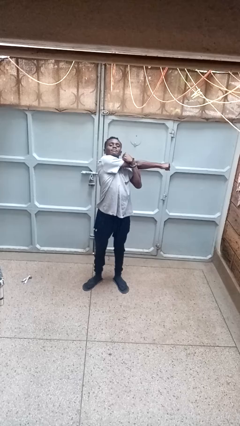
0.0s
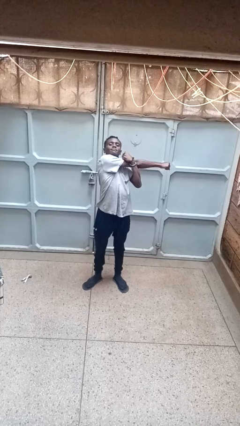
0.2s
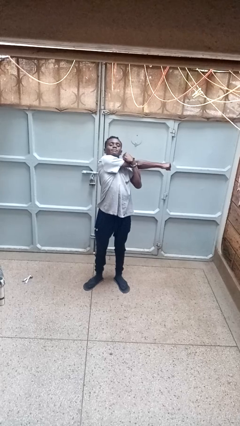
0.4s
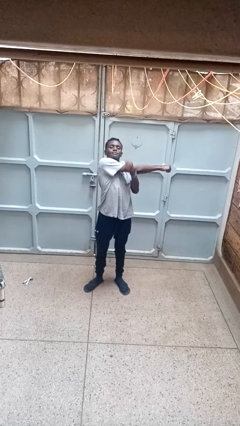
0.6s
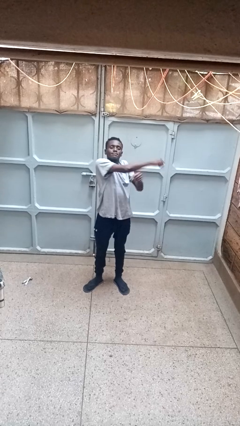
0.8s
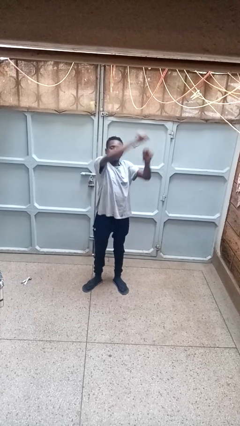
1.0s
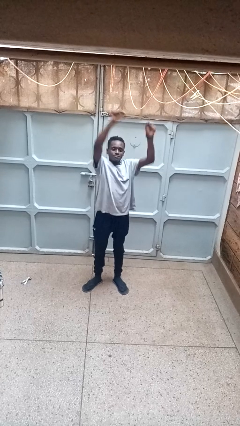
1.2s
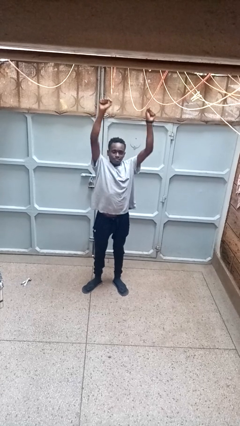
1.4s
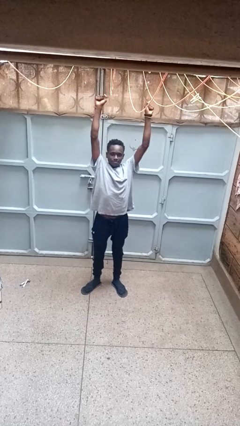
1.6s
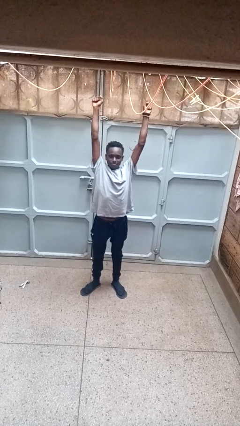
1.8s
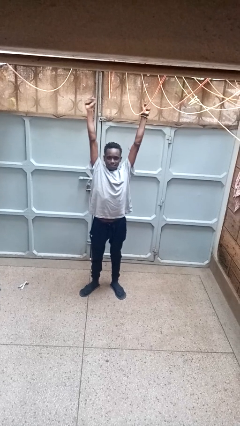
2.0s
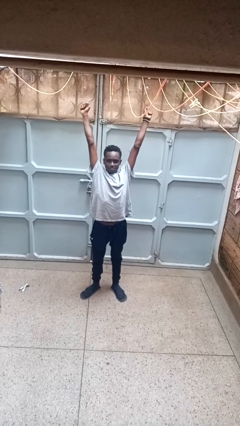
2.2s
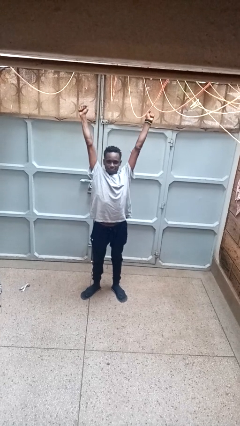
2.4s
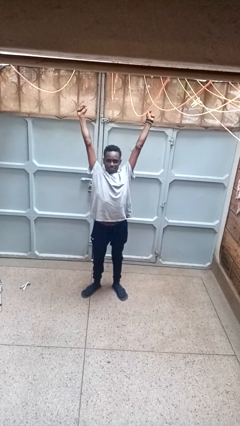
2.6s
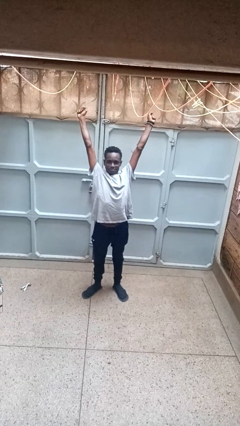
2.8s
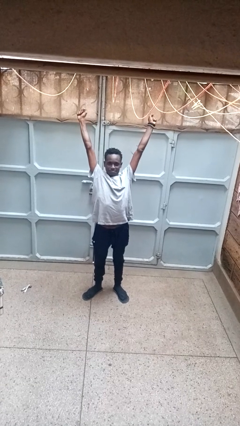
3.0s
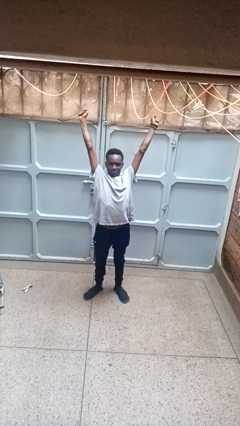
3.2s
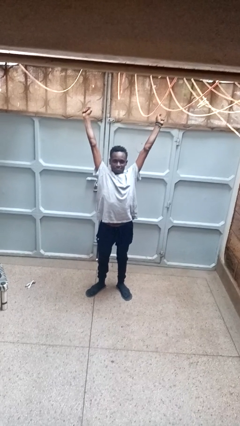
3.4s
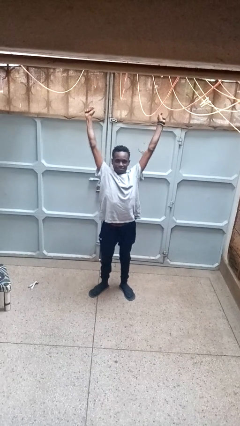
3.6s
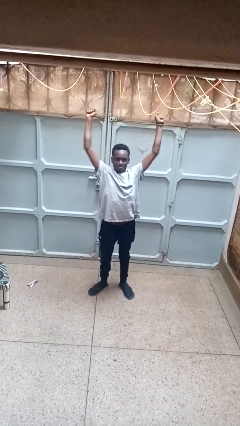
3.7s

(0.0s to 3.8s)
person stretches arms over head

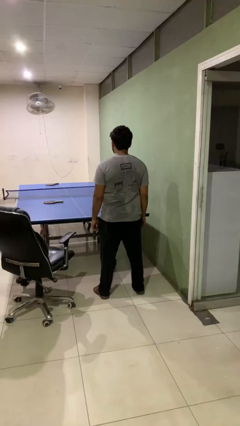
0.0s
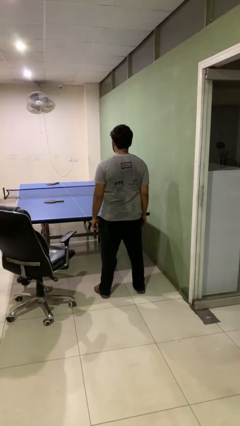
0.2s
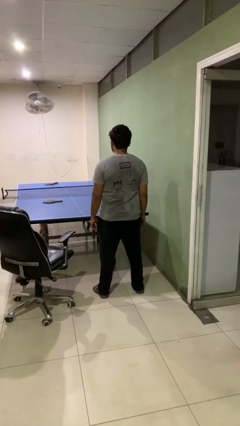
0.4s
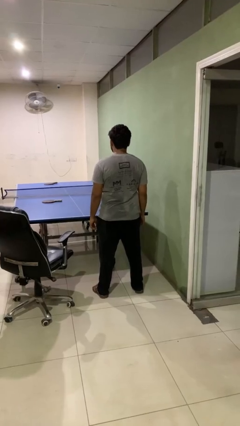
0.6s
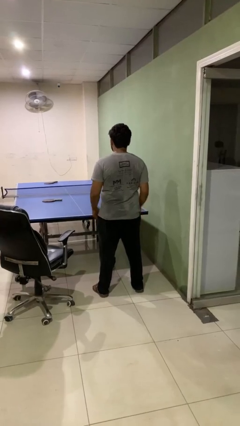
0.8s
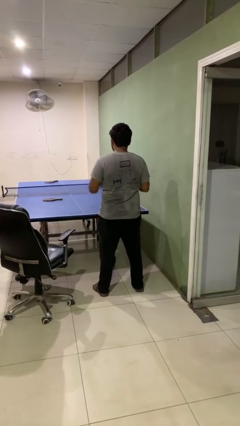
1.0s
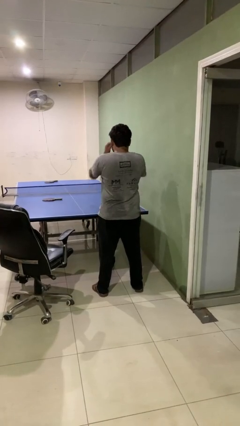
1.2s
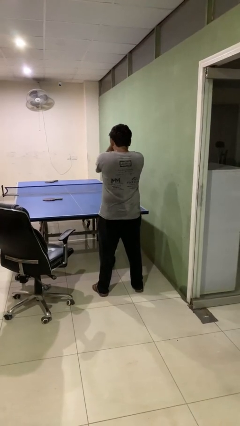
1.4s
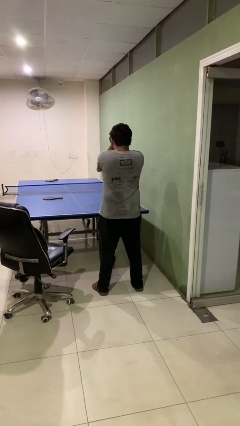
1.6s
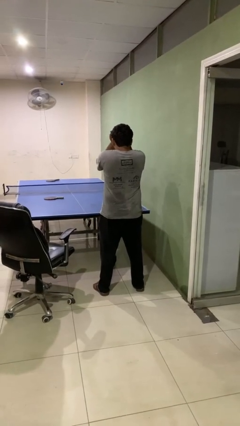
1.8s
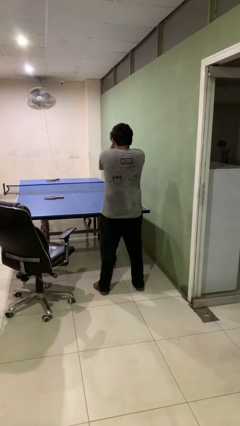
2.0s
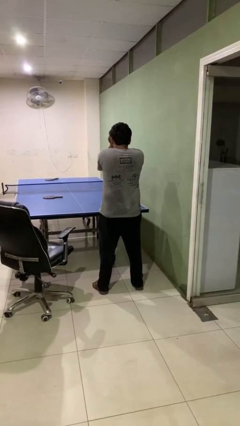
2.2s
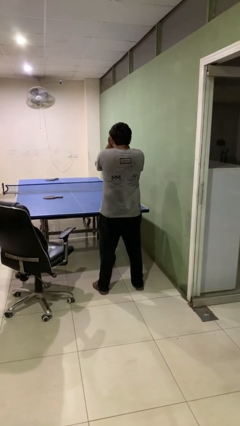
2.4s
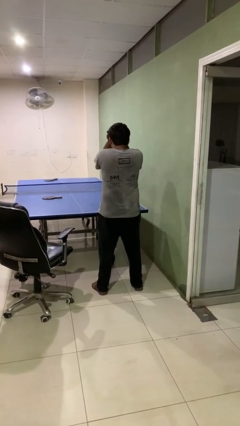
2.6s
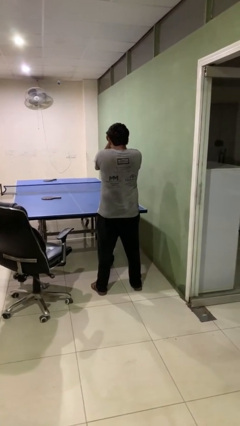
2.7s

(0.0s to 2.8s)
person rubs eyes

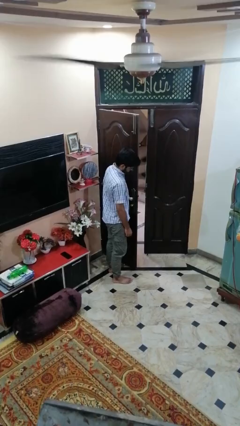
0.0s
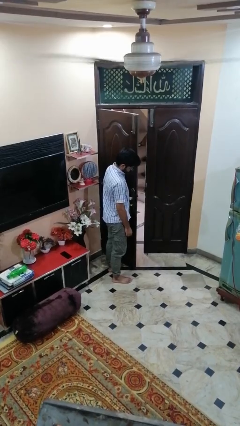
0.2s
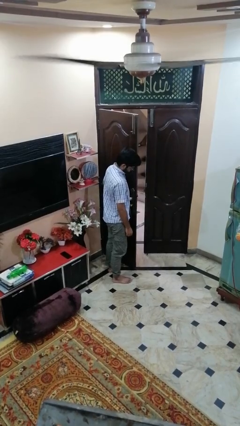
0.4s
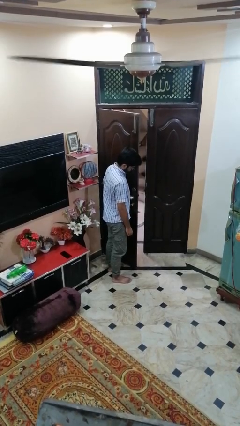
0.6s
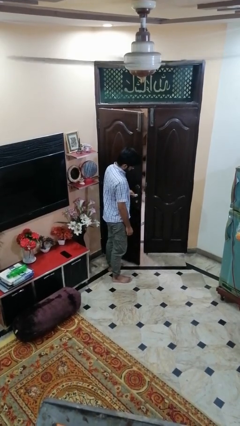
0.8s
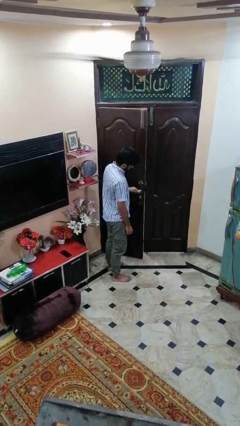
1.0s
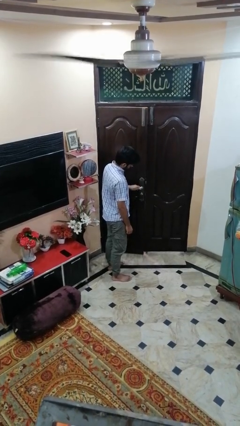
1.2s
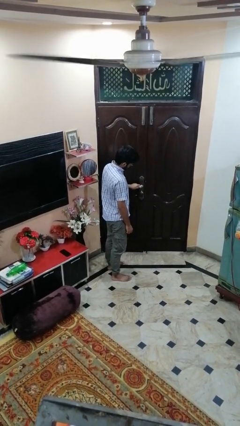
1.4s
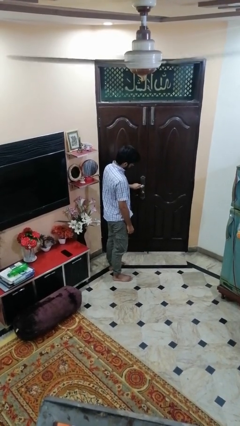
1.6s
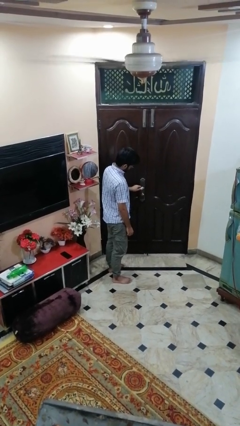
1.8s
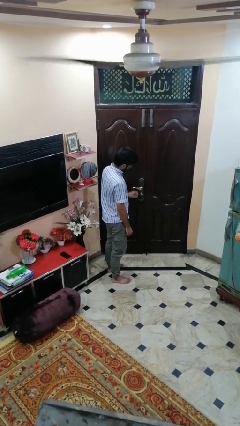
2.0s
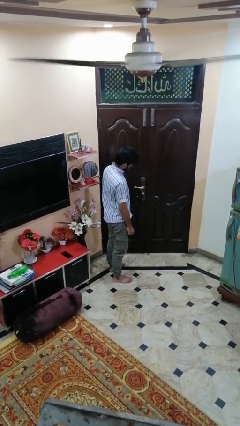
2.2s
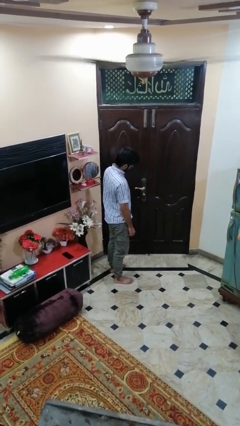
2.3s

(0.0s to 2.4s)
person closes facility door

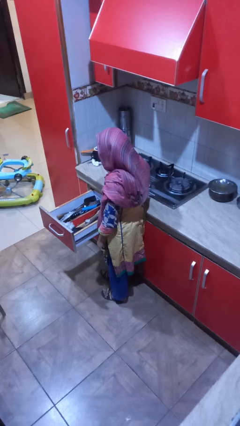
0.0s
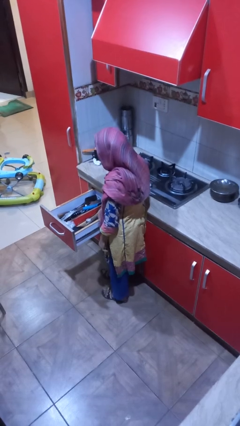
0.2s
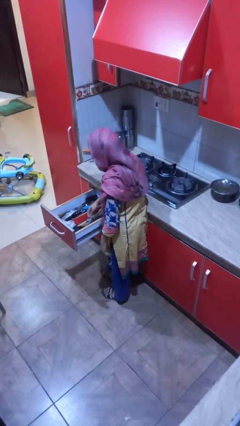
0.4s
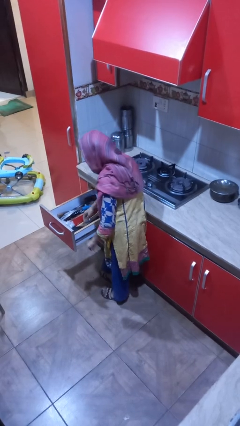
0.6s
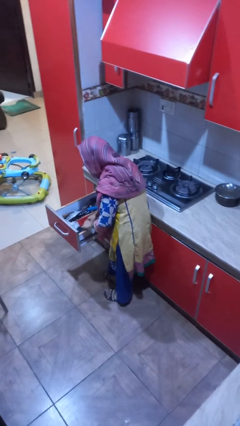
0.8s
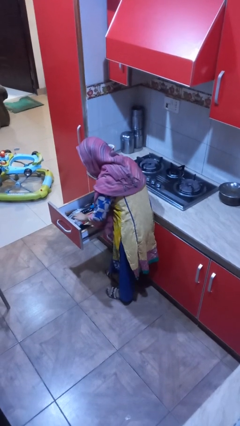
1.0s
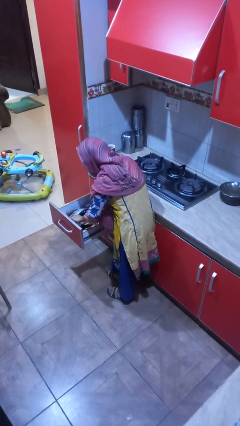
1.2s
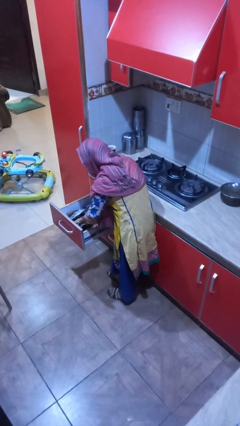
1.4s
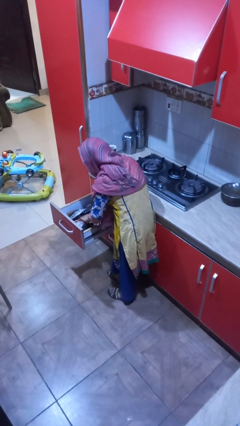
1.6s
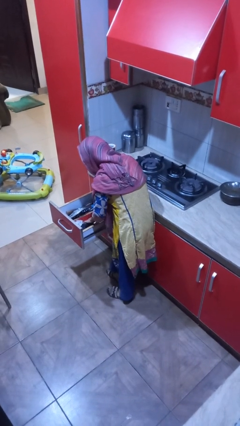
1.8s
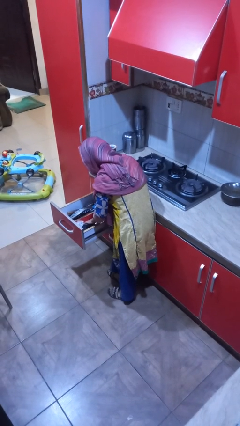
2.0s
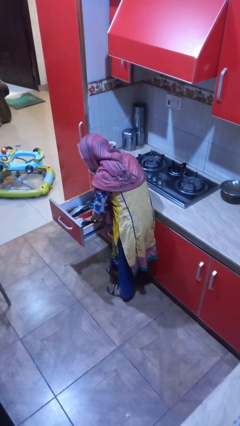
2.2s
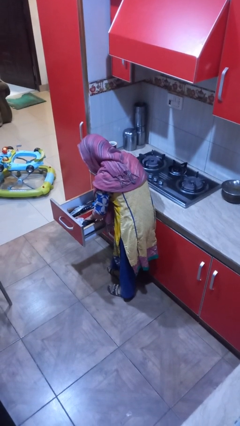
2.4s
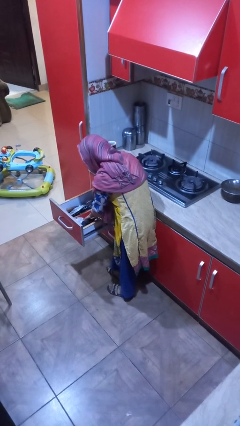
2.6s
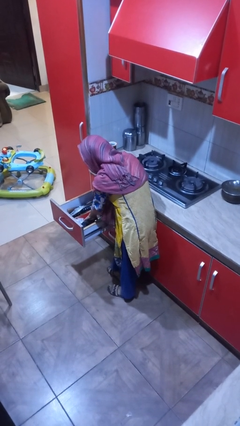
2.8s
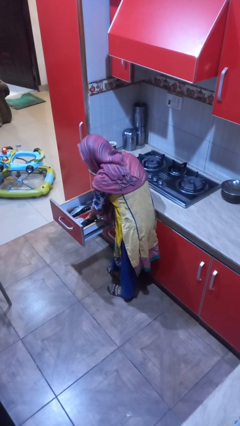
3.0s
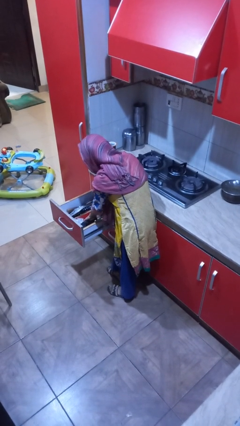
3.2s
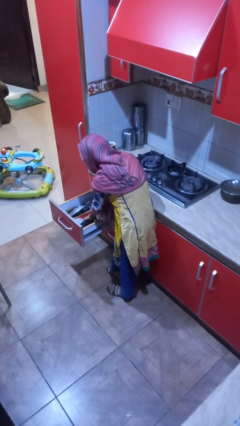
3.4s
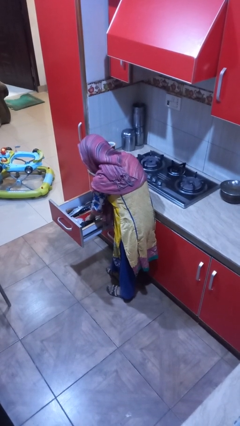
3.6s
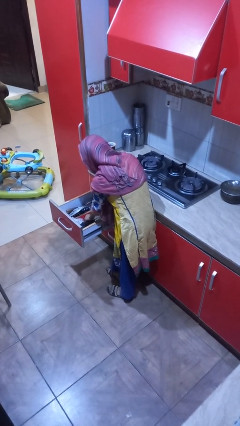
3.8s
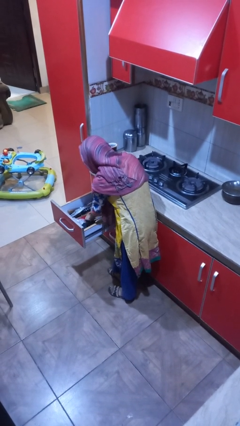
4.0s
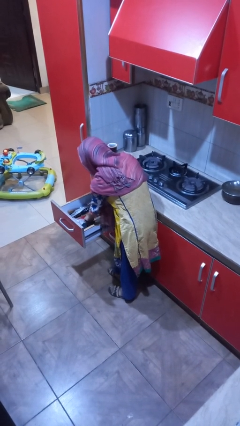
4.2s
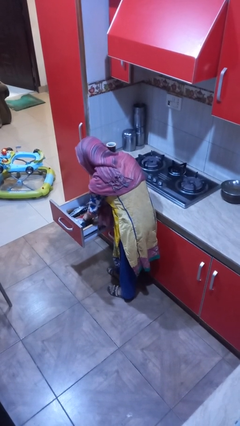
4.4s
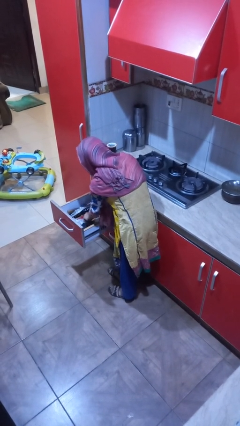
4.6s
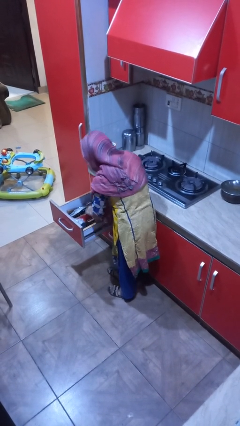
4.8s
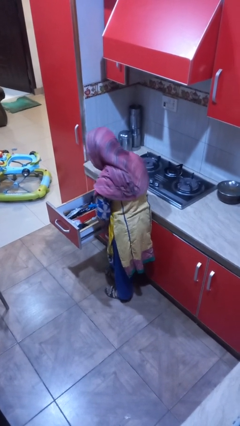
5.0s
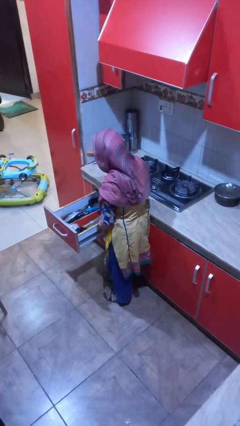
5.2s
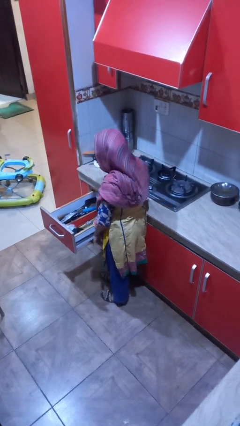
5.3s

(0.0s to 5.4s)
person searches in kitchen drawer

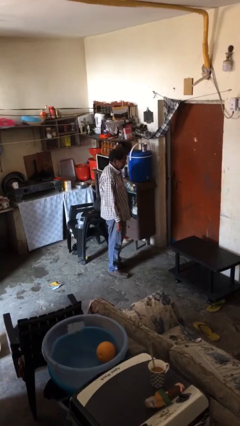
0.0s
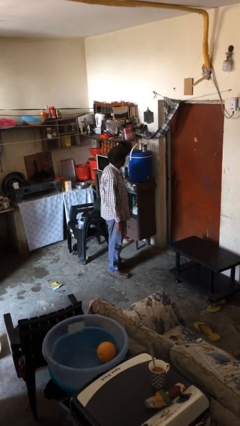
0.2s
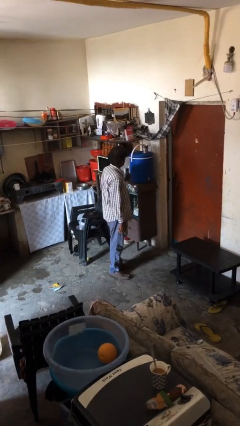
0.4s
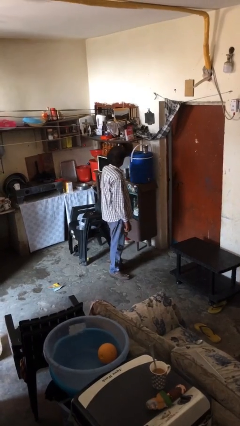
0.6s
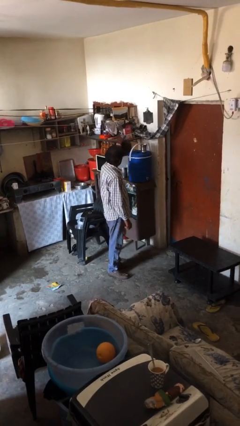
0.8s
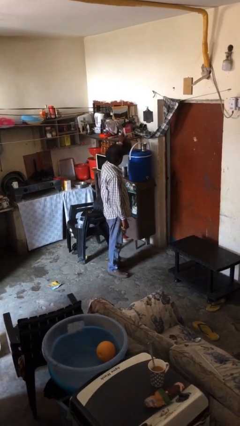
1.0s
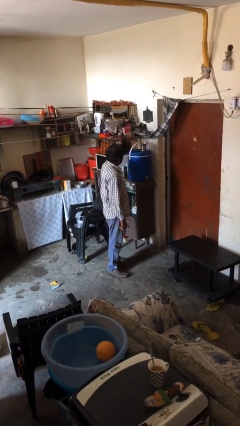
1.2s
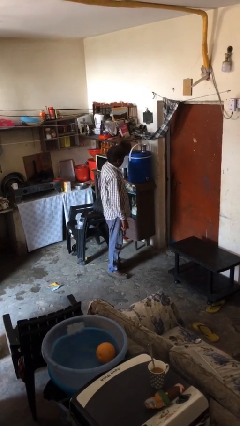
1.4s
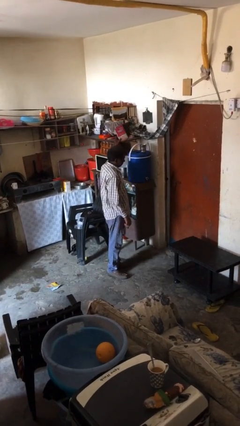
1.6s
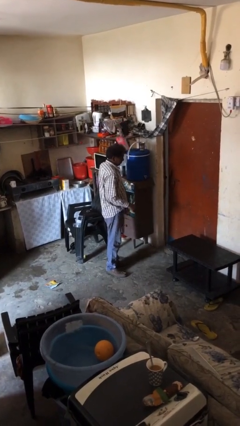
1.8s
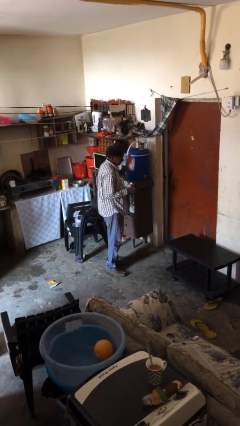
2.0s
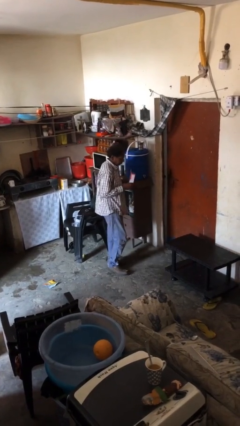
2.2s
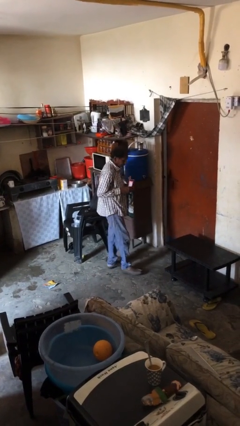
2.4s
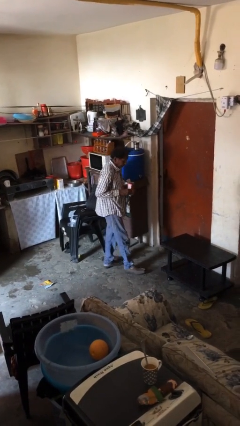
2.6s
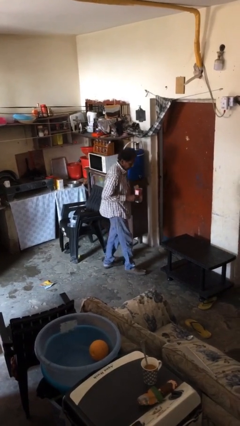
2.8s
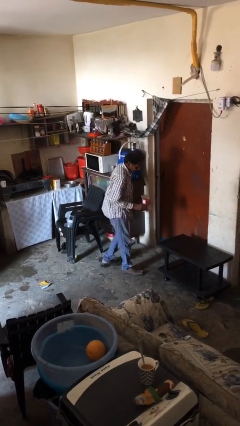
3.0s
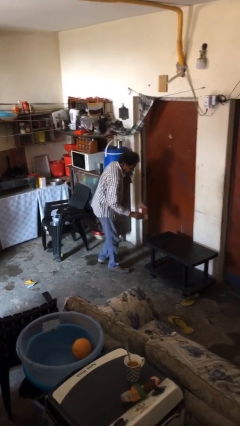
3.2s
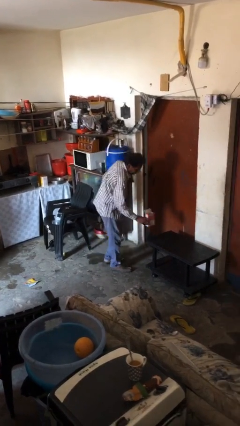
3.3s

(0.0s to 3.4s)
person picks up object from shelf
